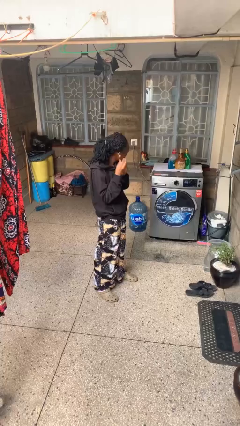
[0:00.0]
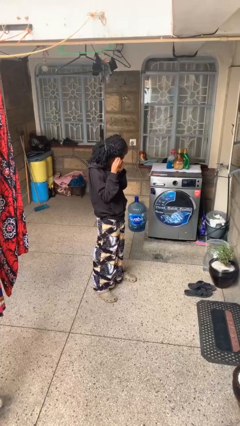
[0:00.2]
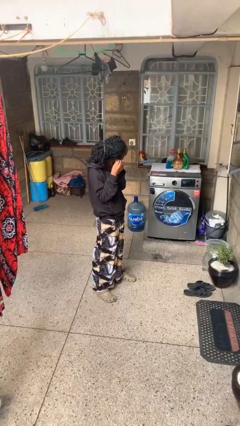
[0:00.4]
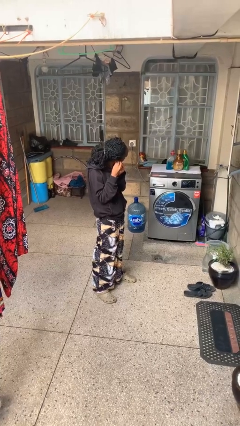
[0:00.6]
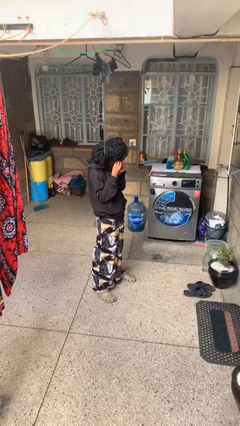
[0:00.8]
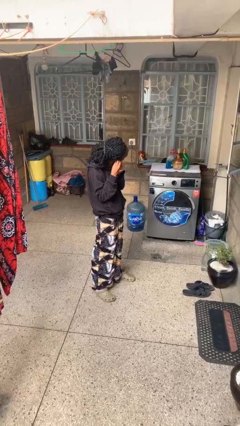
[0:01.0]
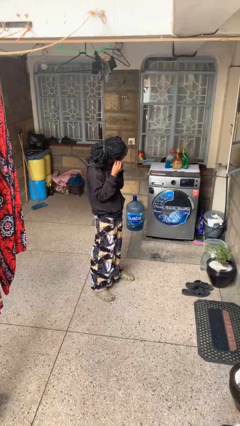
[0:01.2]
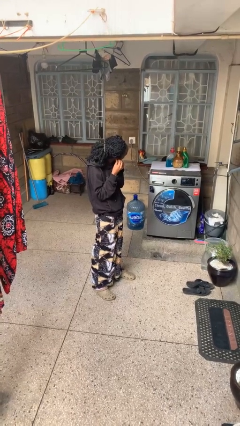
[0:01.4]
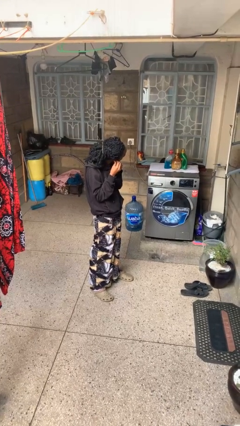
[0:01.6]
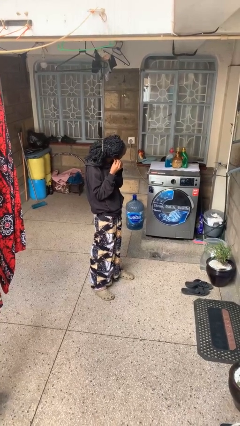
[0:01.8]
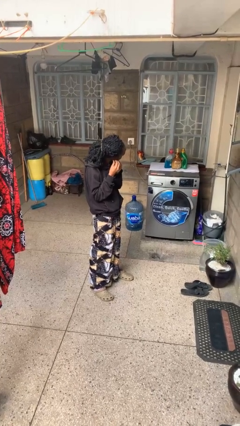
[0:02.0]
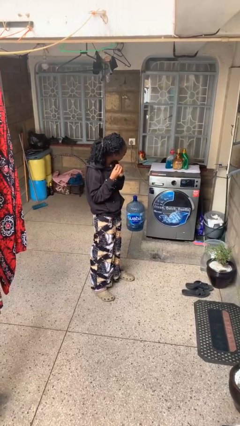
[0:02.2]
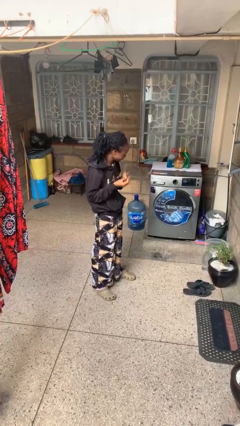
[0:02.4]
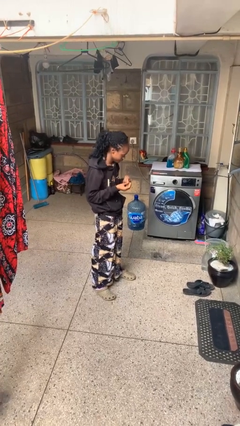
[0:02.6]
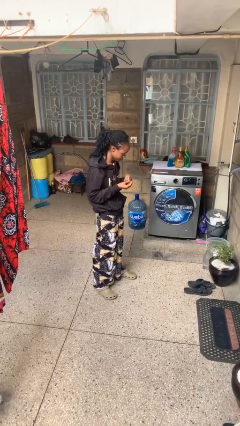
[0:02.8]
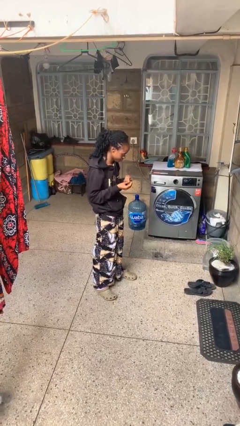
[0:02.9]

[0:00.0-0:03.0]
person takes off earrings

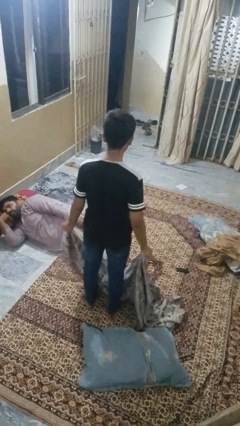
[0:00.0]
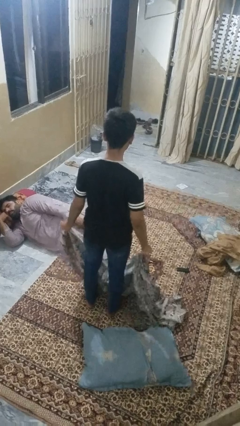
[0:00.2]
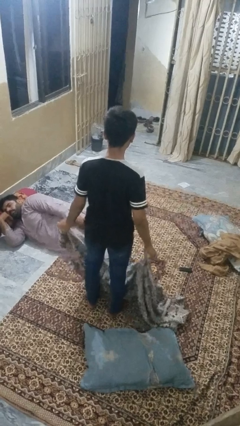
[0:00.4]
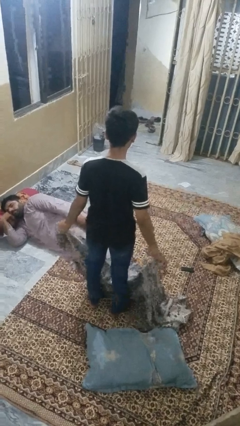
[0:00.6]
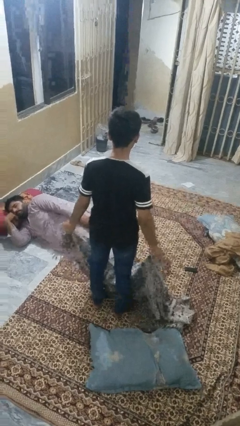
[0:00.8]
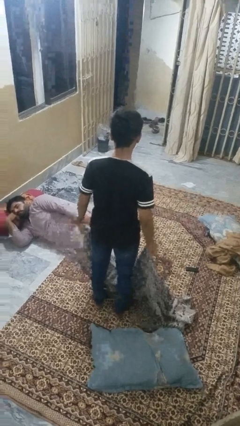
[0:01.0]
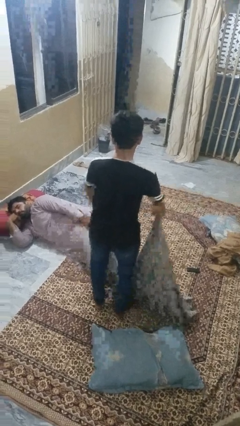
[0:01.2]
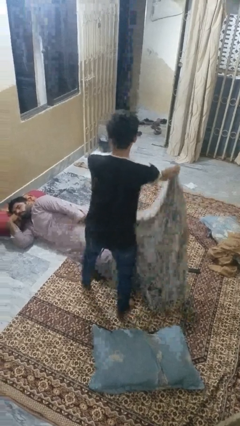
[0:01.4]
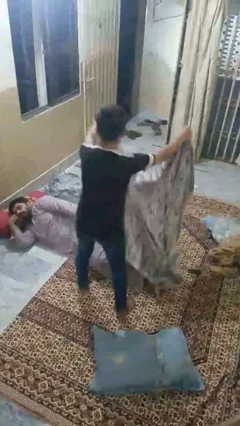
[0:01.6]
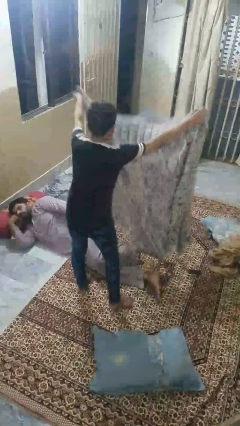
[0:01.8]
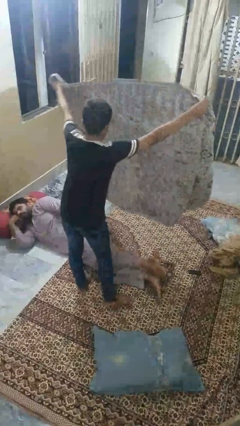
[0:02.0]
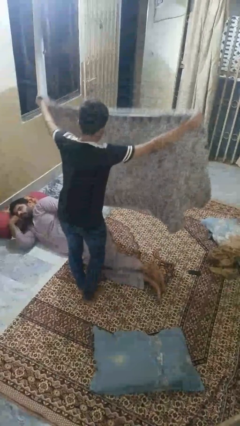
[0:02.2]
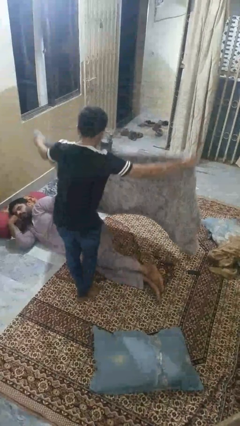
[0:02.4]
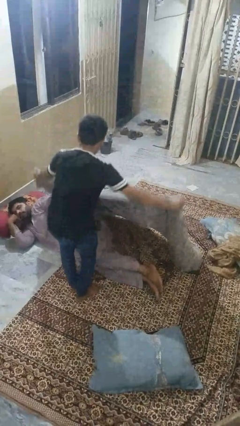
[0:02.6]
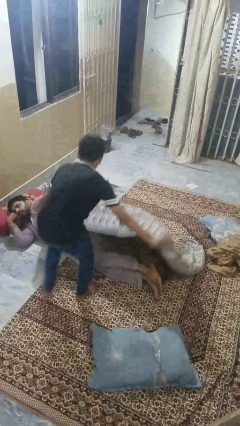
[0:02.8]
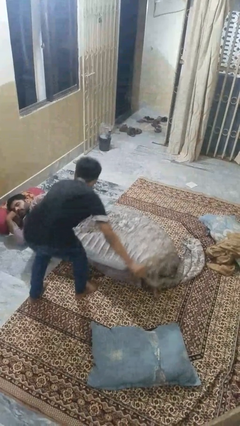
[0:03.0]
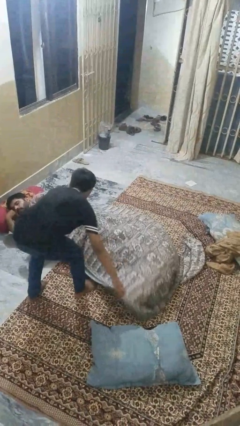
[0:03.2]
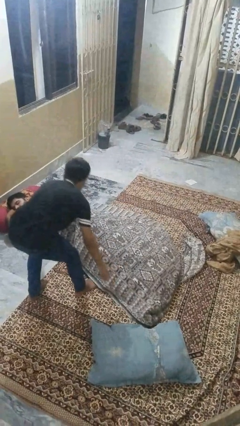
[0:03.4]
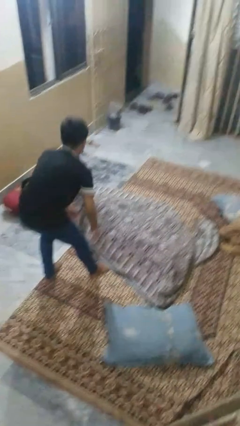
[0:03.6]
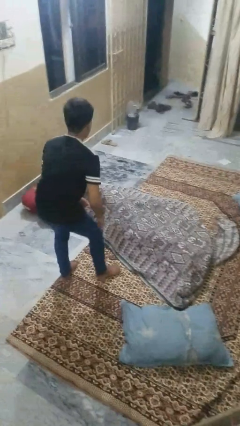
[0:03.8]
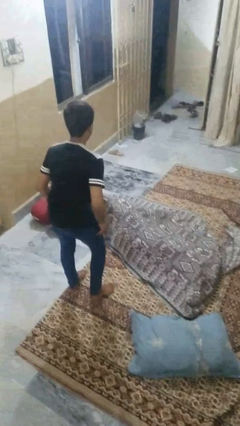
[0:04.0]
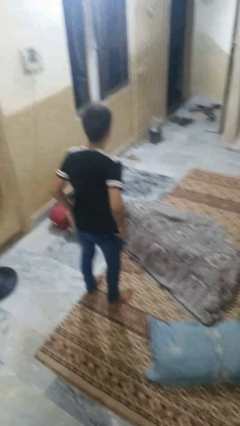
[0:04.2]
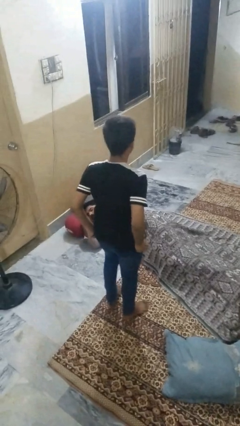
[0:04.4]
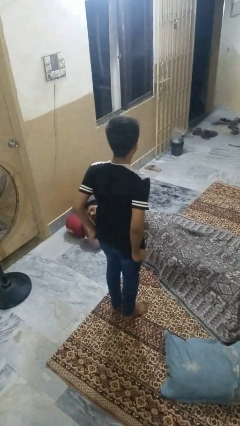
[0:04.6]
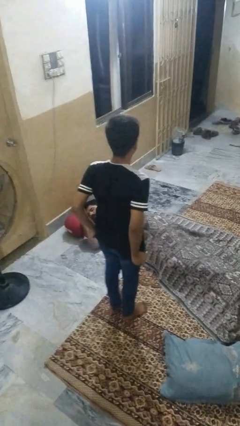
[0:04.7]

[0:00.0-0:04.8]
person covers friend with blanket

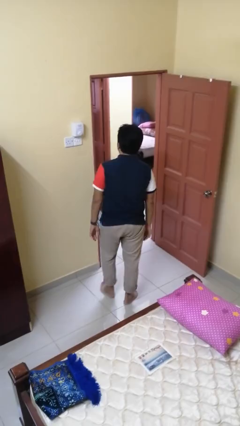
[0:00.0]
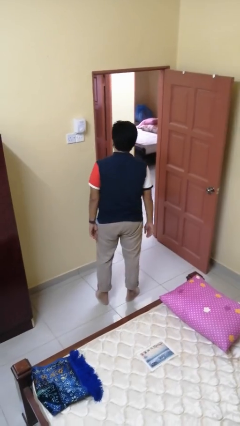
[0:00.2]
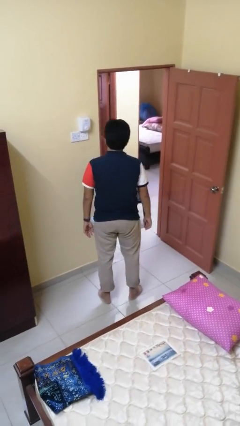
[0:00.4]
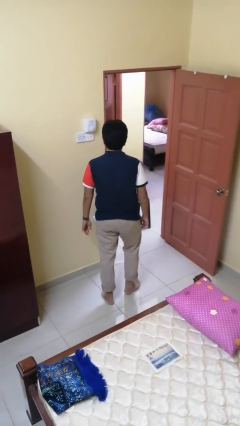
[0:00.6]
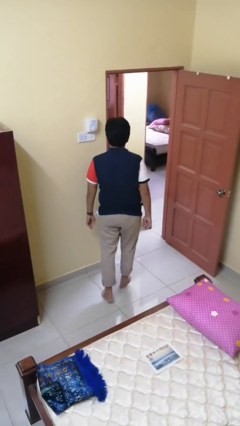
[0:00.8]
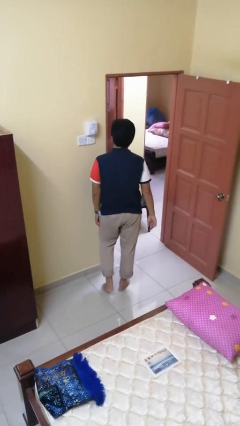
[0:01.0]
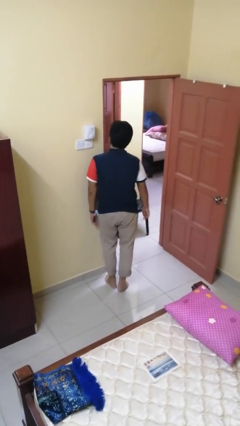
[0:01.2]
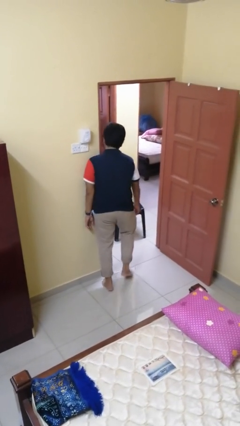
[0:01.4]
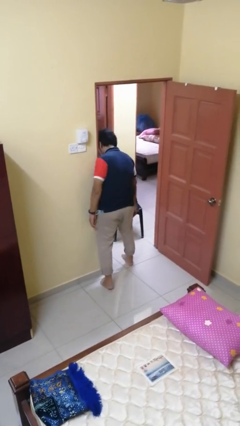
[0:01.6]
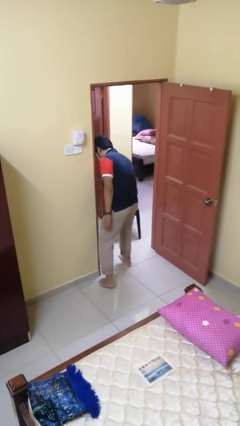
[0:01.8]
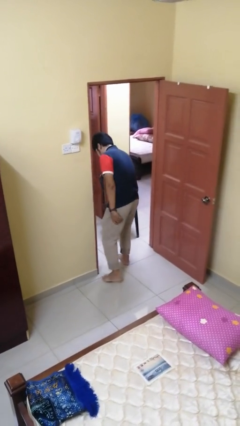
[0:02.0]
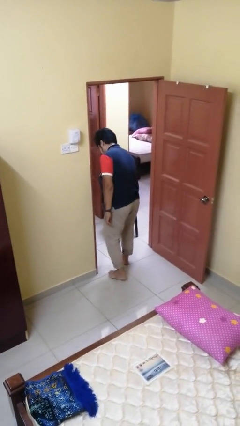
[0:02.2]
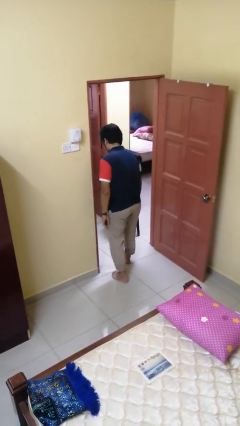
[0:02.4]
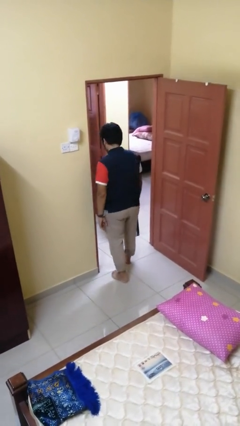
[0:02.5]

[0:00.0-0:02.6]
person bumps into wall

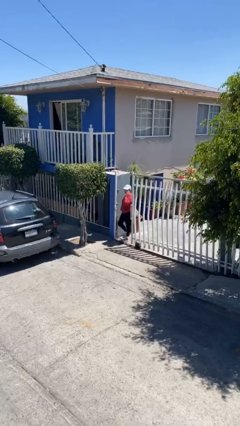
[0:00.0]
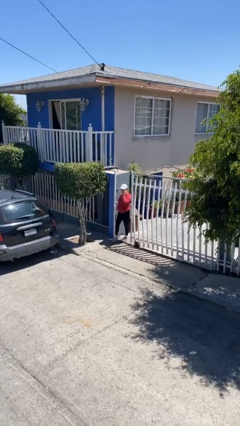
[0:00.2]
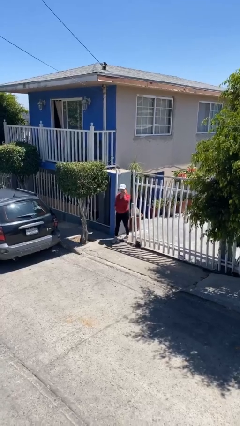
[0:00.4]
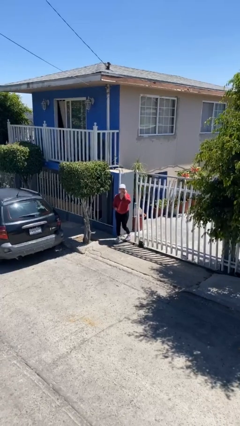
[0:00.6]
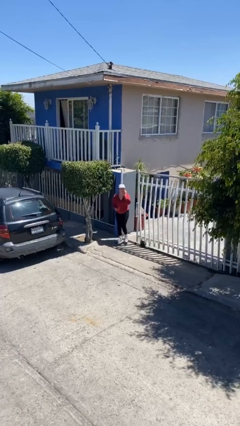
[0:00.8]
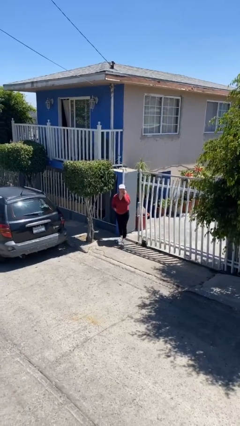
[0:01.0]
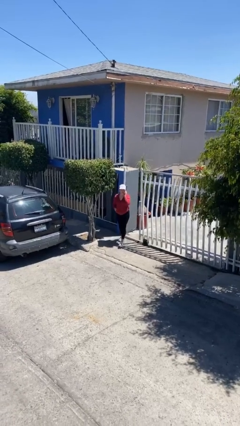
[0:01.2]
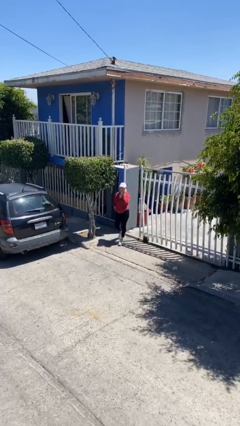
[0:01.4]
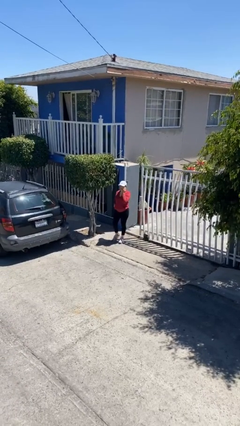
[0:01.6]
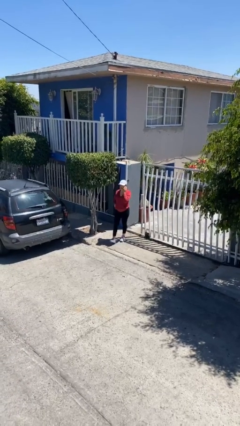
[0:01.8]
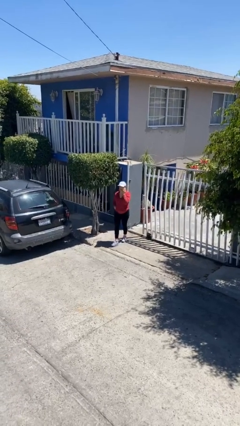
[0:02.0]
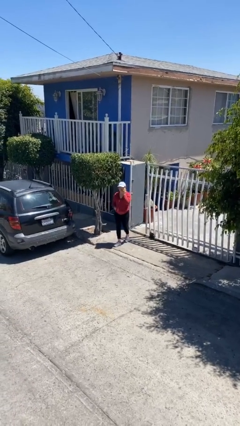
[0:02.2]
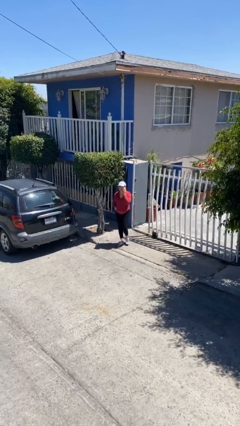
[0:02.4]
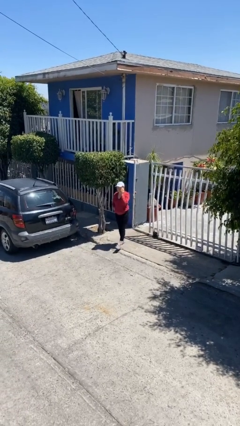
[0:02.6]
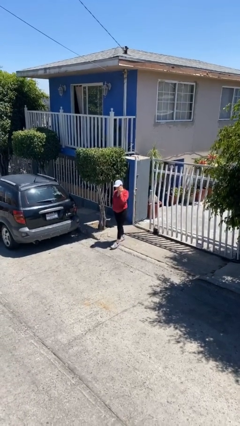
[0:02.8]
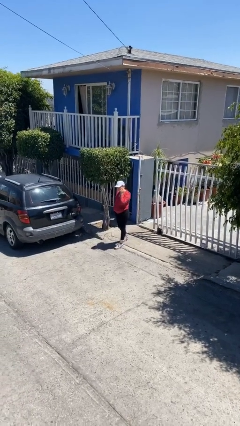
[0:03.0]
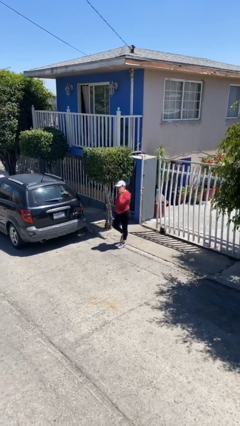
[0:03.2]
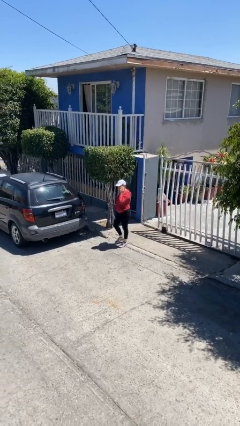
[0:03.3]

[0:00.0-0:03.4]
person enters scene through structure

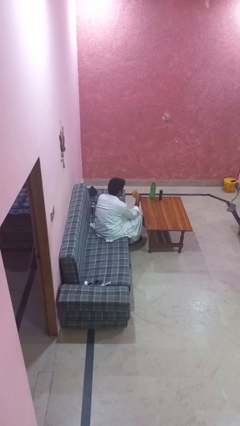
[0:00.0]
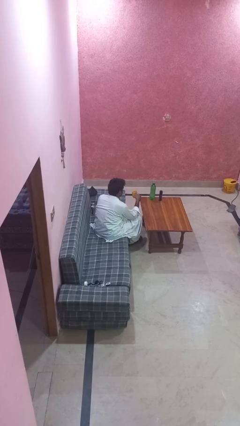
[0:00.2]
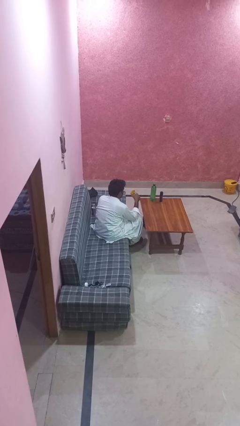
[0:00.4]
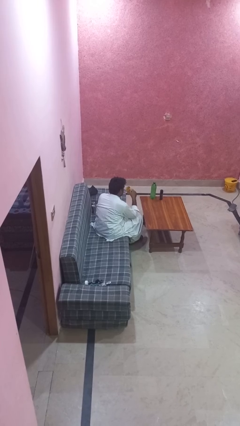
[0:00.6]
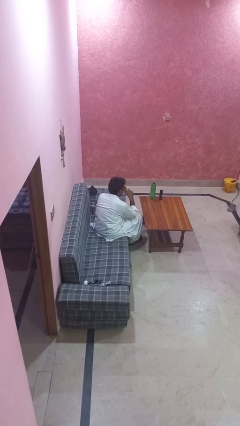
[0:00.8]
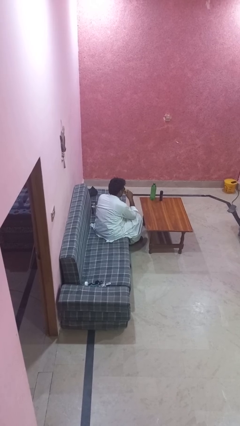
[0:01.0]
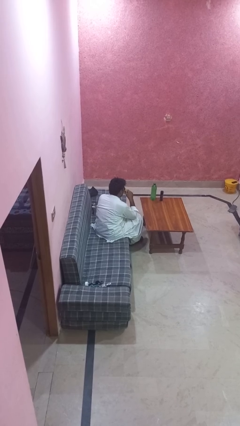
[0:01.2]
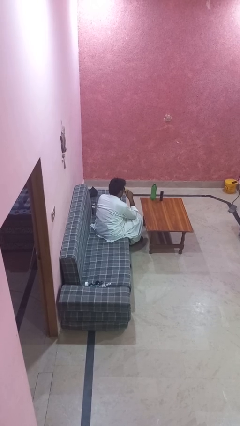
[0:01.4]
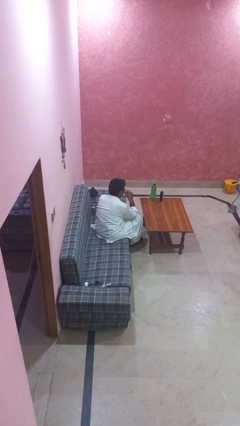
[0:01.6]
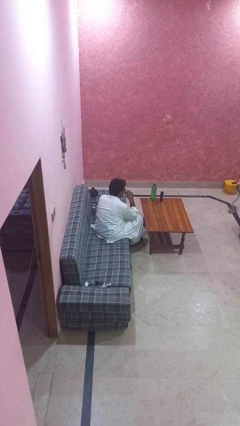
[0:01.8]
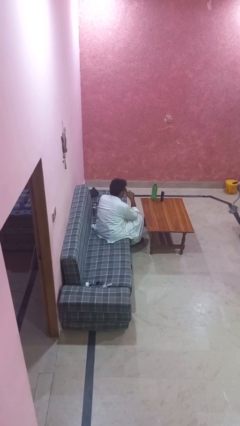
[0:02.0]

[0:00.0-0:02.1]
person drinks from mug

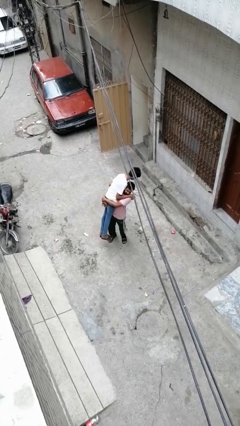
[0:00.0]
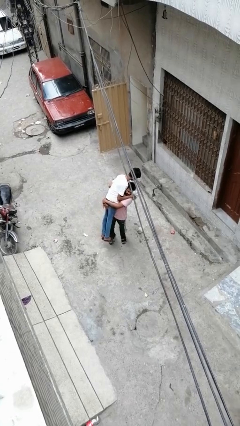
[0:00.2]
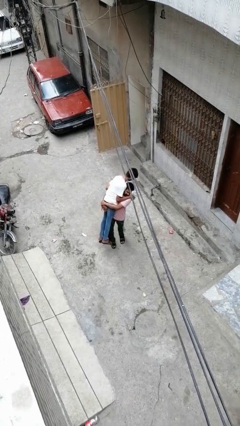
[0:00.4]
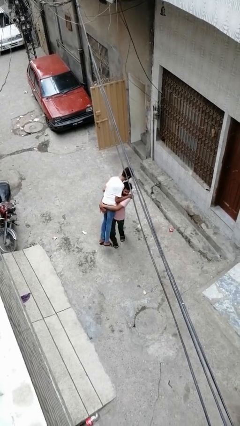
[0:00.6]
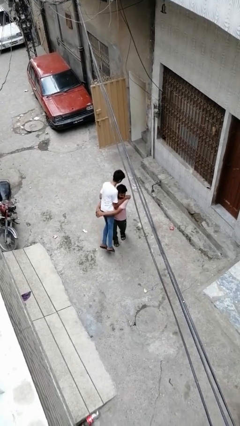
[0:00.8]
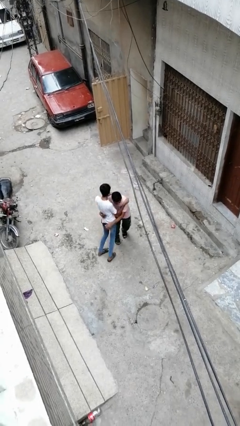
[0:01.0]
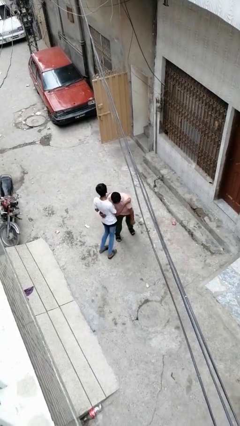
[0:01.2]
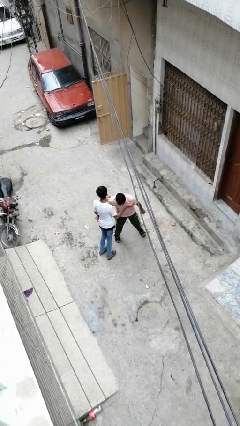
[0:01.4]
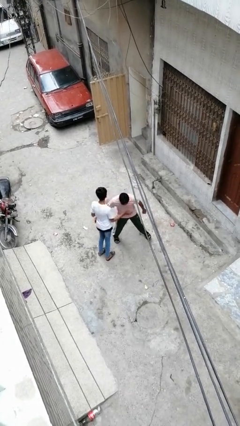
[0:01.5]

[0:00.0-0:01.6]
person puts down person

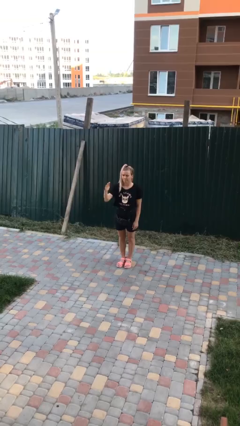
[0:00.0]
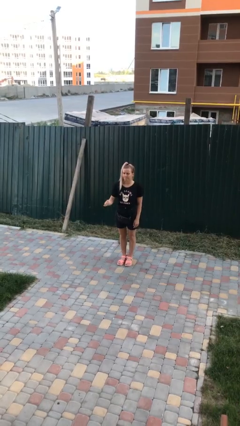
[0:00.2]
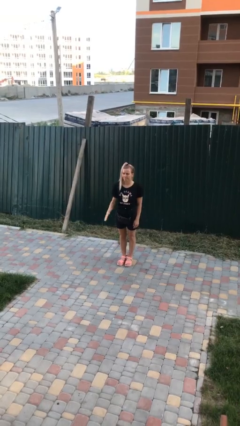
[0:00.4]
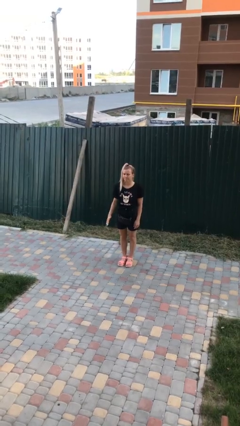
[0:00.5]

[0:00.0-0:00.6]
person gestures lower hand
